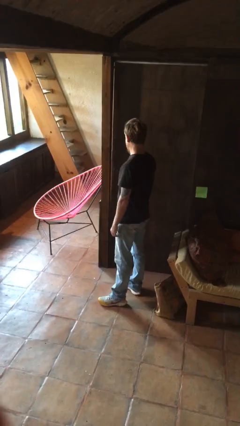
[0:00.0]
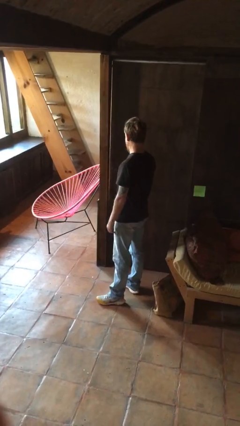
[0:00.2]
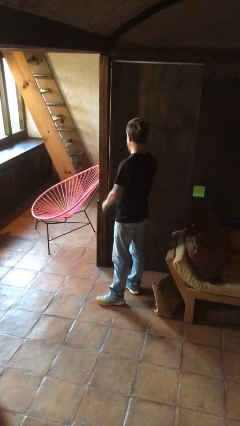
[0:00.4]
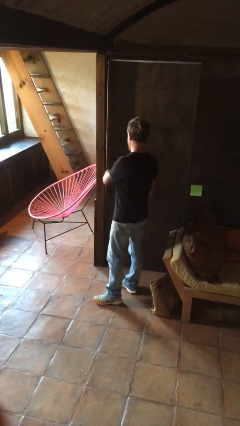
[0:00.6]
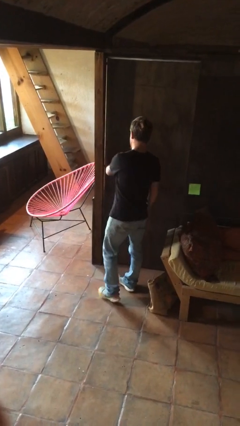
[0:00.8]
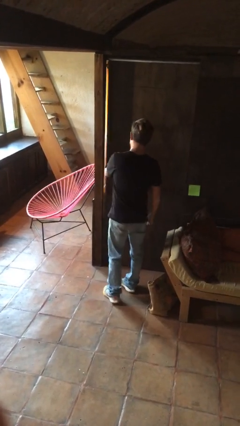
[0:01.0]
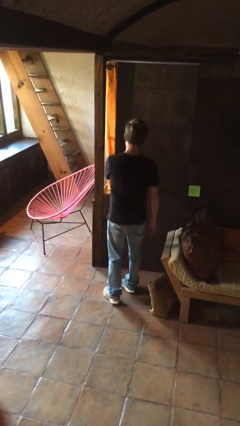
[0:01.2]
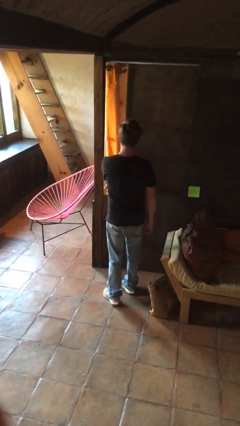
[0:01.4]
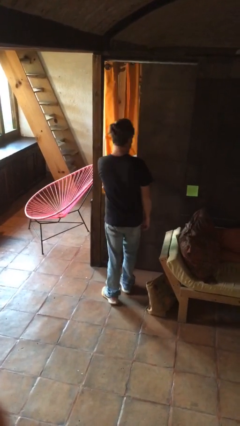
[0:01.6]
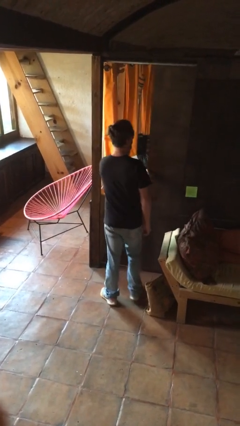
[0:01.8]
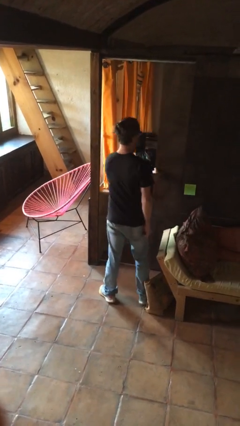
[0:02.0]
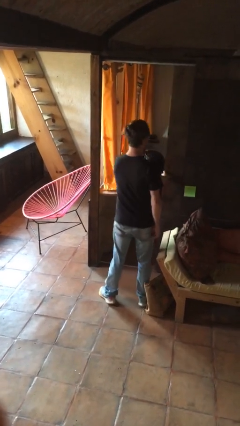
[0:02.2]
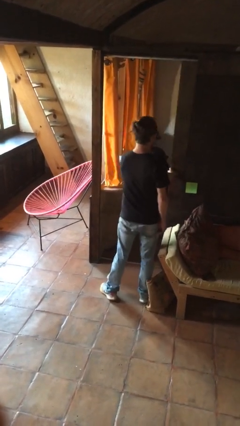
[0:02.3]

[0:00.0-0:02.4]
person opens facility door

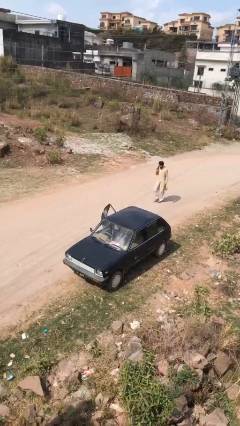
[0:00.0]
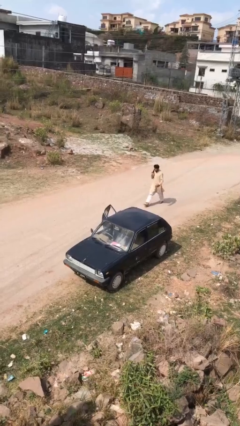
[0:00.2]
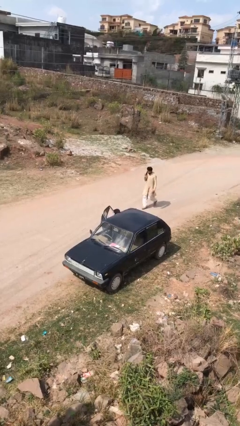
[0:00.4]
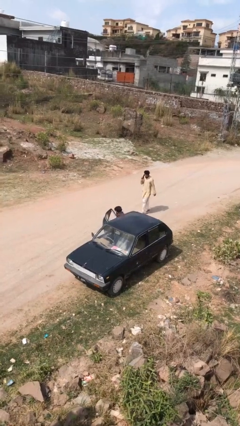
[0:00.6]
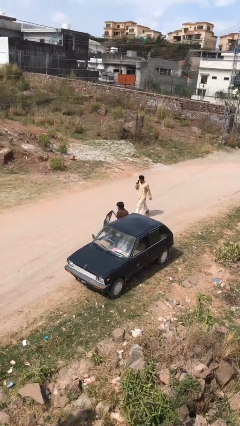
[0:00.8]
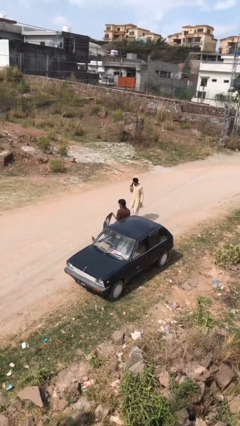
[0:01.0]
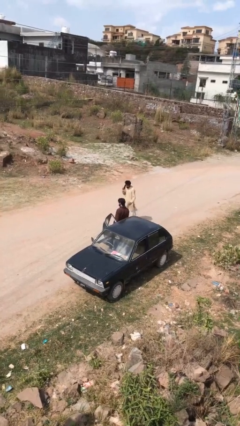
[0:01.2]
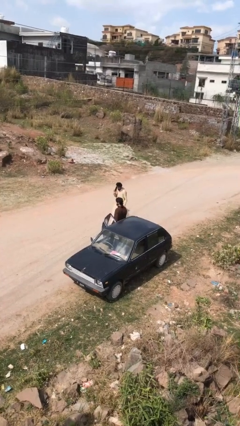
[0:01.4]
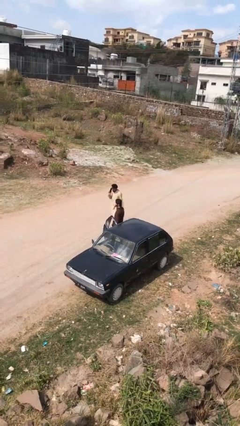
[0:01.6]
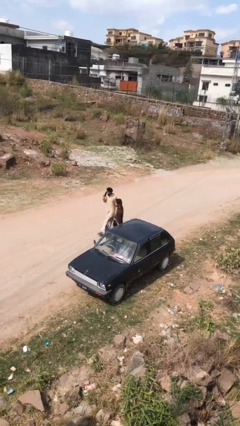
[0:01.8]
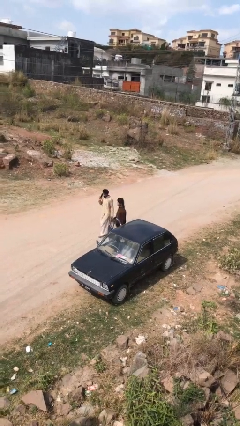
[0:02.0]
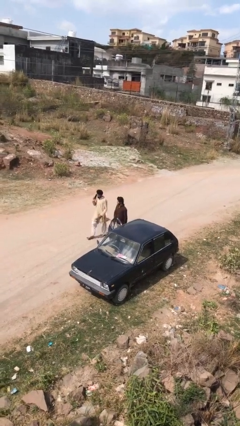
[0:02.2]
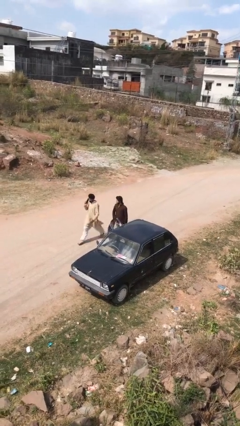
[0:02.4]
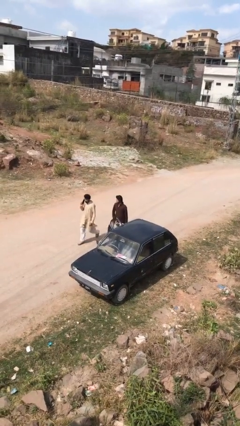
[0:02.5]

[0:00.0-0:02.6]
person exits car

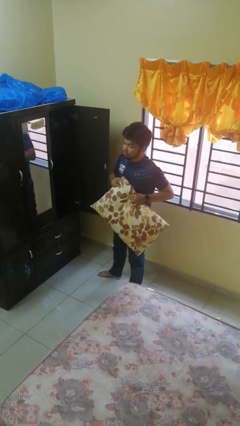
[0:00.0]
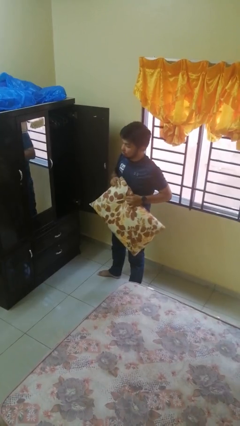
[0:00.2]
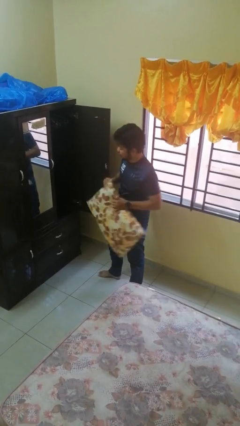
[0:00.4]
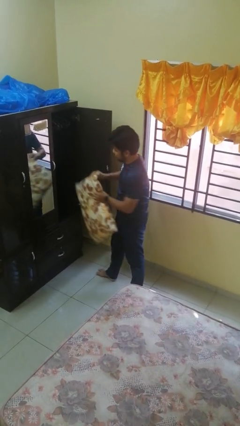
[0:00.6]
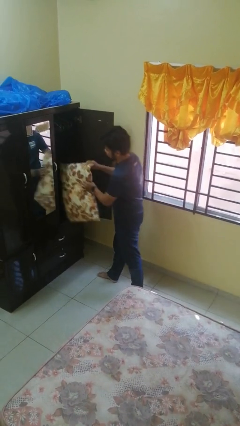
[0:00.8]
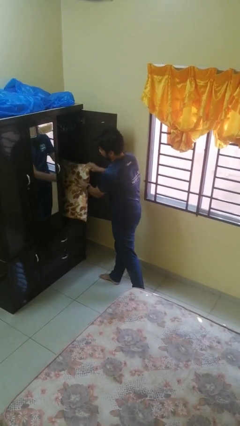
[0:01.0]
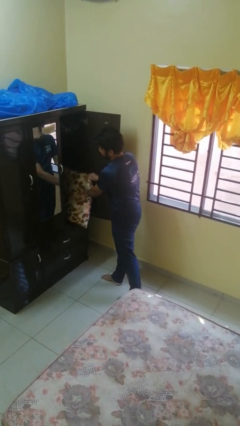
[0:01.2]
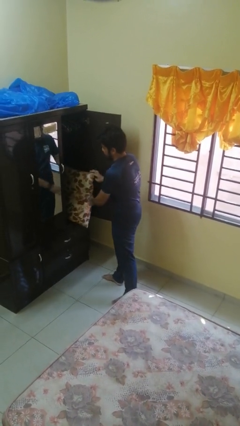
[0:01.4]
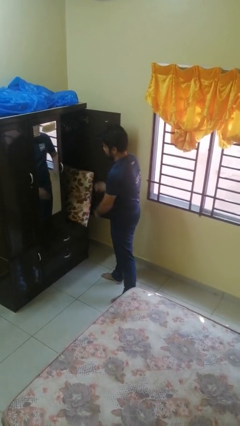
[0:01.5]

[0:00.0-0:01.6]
person puts down object into cabinet

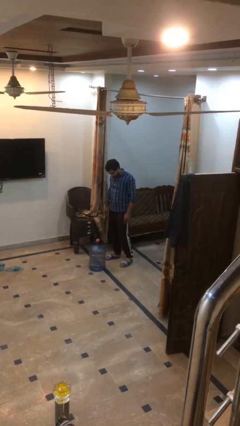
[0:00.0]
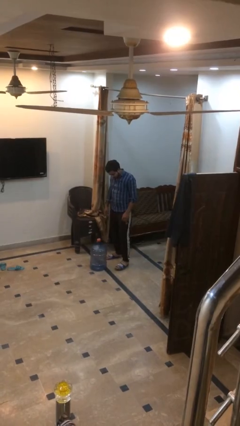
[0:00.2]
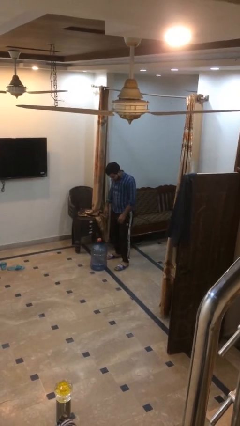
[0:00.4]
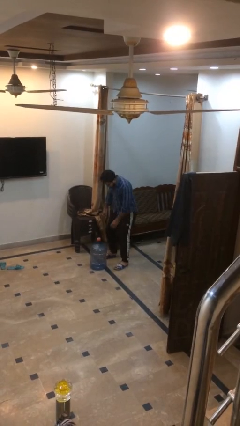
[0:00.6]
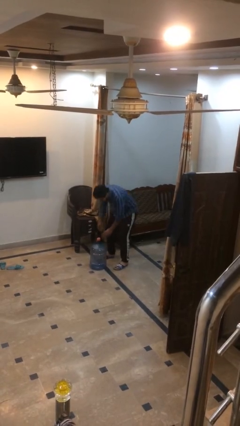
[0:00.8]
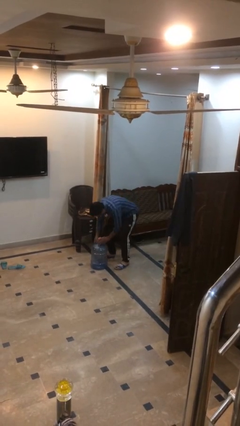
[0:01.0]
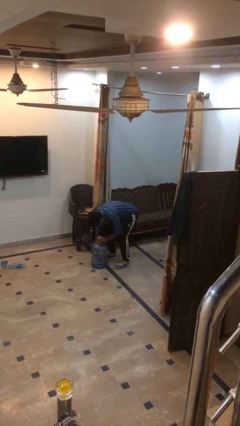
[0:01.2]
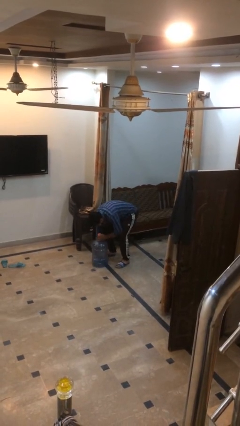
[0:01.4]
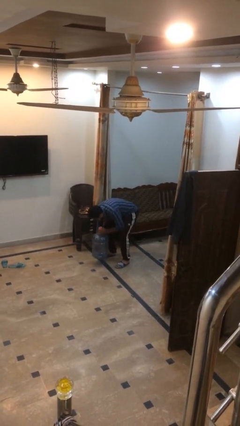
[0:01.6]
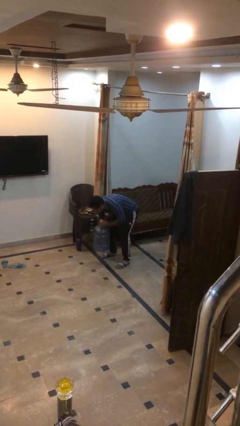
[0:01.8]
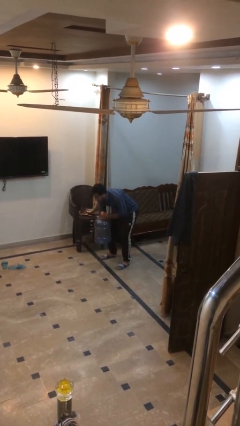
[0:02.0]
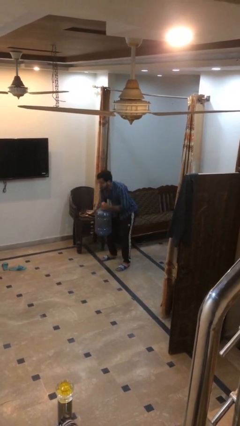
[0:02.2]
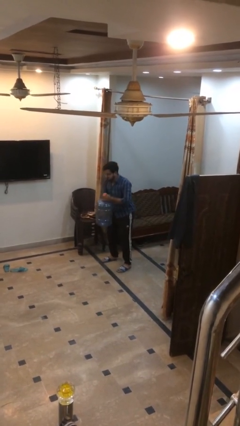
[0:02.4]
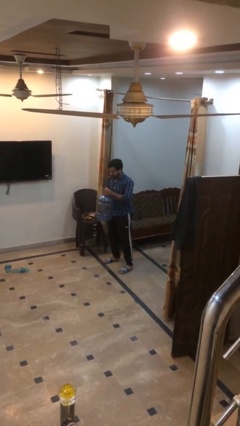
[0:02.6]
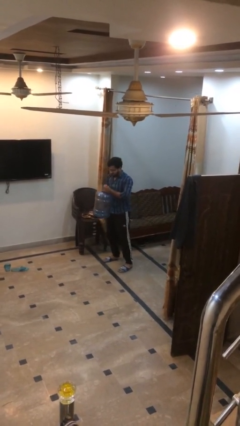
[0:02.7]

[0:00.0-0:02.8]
person picks up object from floor

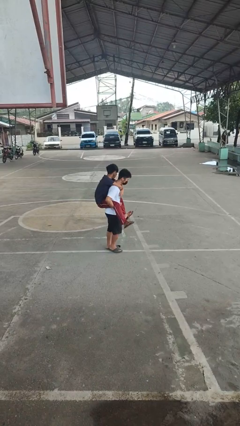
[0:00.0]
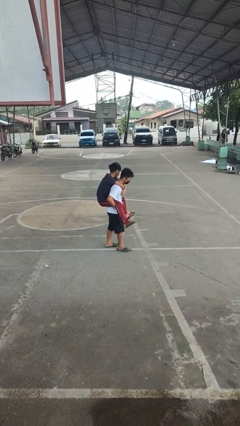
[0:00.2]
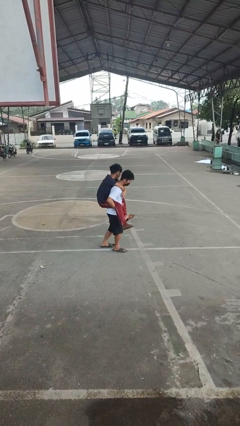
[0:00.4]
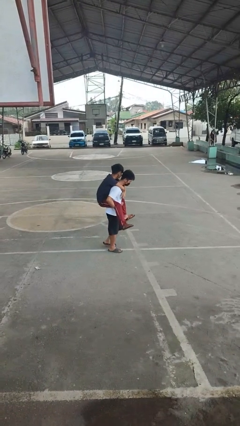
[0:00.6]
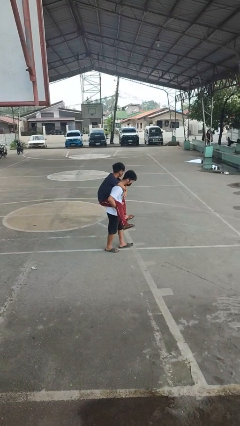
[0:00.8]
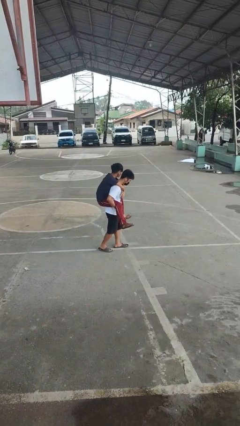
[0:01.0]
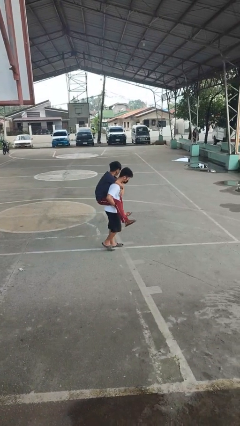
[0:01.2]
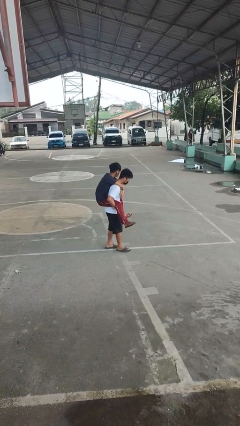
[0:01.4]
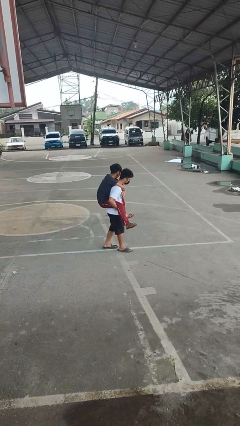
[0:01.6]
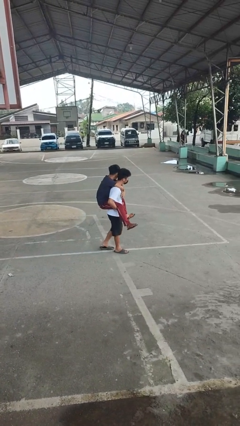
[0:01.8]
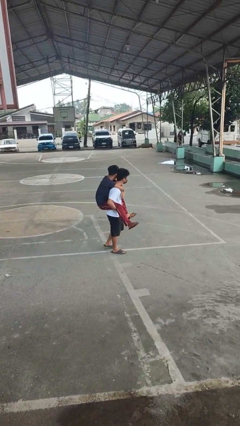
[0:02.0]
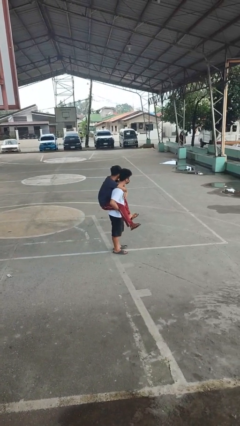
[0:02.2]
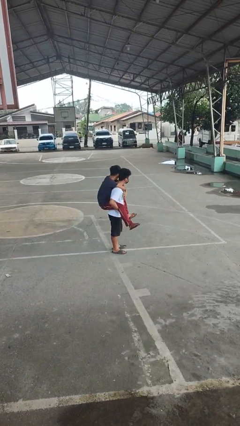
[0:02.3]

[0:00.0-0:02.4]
person carries person on back

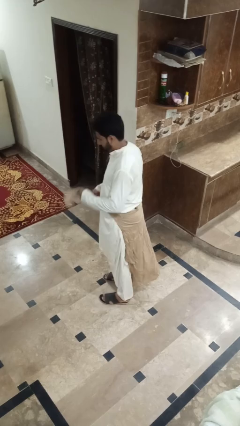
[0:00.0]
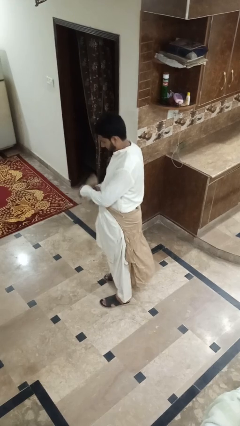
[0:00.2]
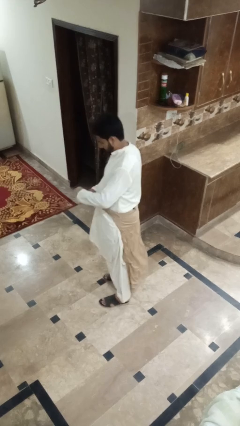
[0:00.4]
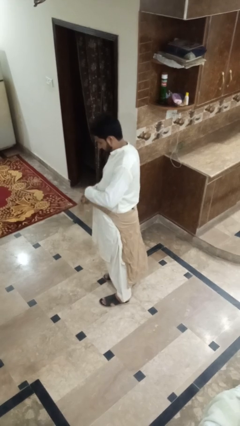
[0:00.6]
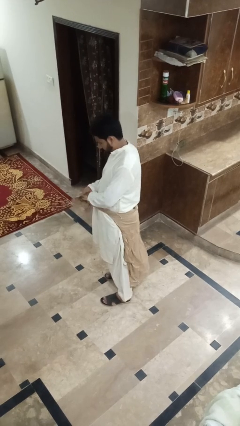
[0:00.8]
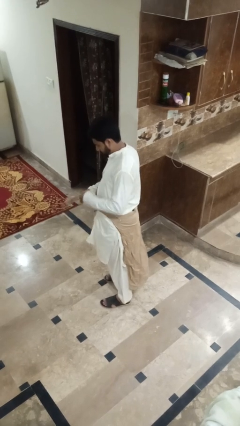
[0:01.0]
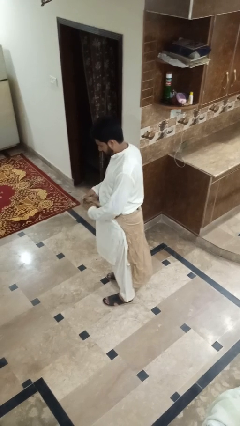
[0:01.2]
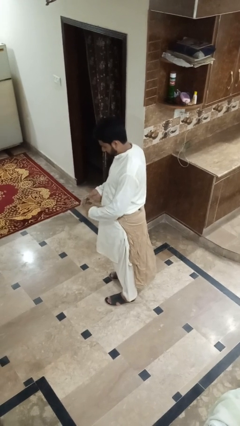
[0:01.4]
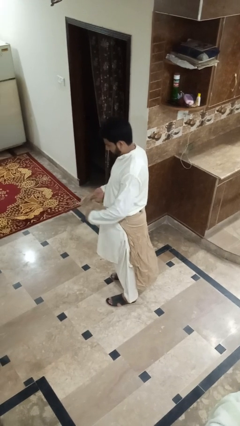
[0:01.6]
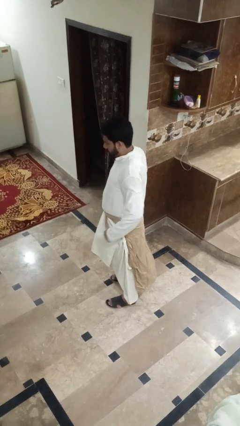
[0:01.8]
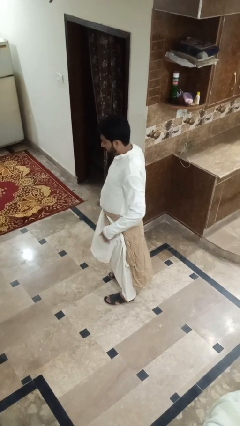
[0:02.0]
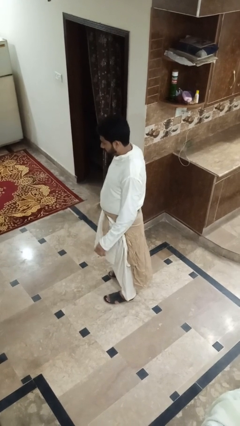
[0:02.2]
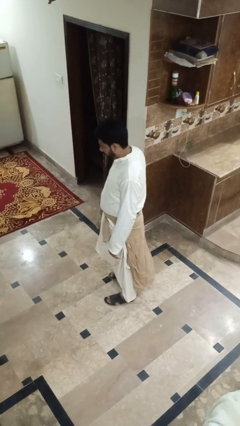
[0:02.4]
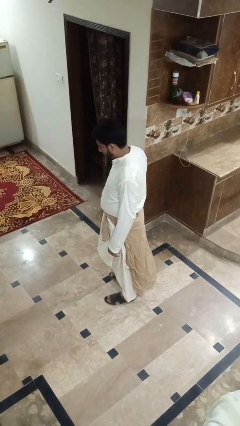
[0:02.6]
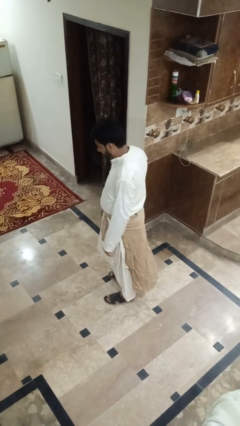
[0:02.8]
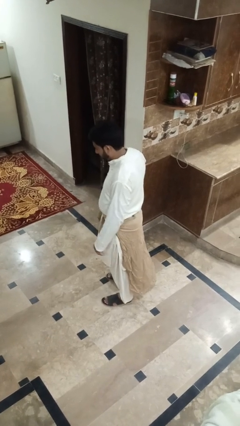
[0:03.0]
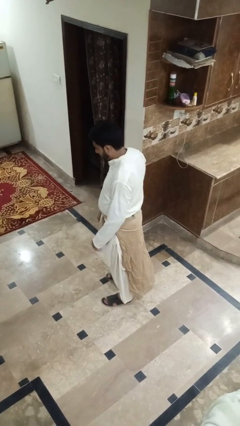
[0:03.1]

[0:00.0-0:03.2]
person ties jacket around waist

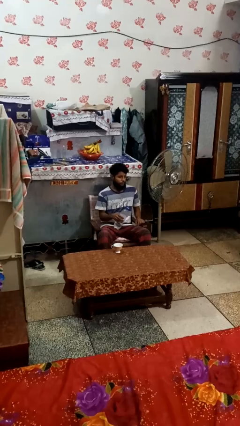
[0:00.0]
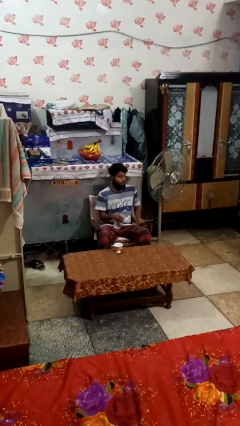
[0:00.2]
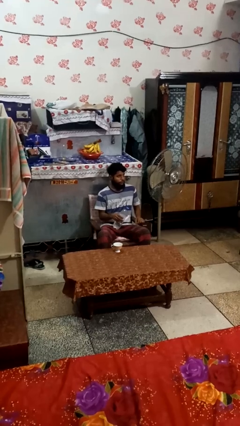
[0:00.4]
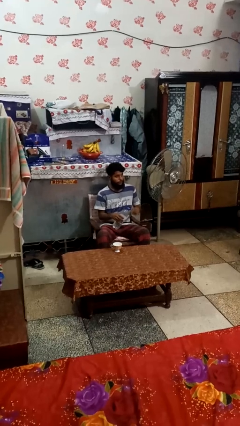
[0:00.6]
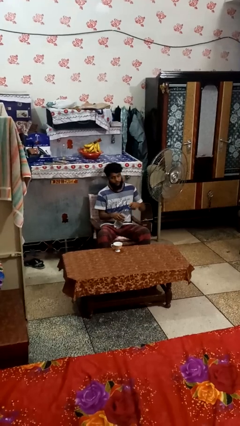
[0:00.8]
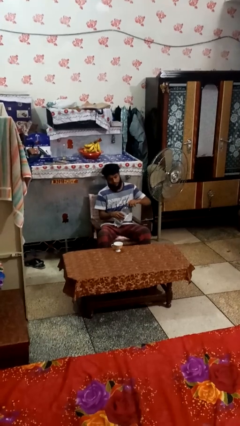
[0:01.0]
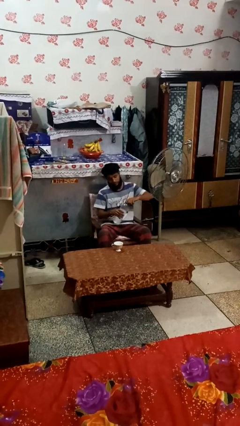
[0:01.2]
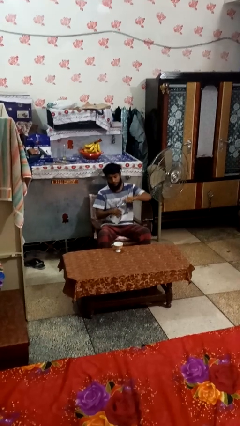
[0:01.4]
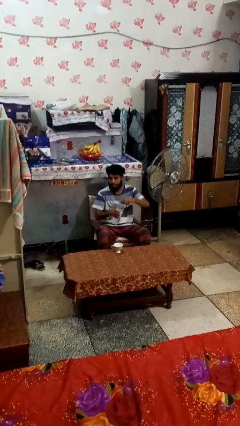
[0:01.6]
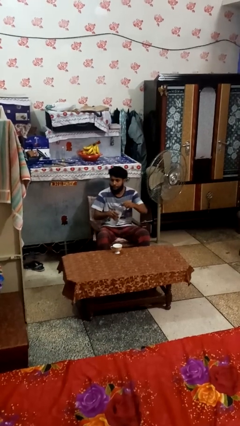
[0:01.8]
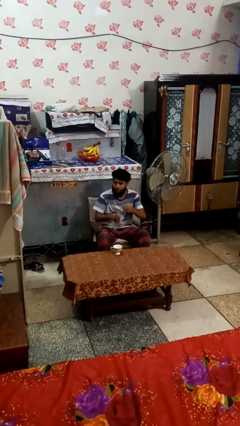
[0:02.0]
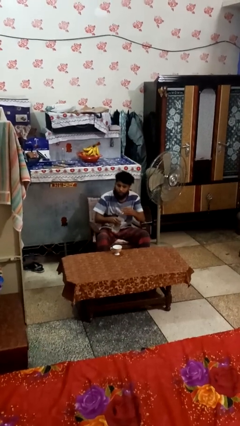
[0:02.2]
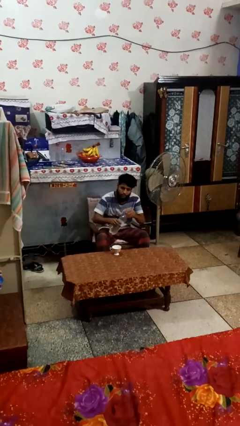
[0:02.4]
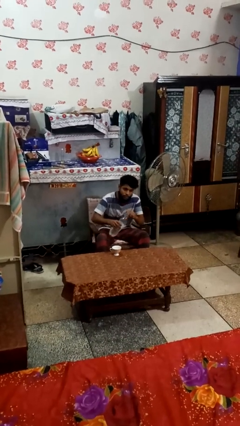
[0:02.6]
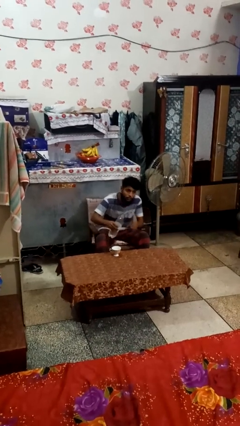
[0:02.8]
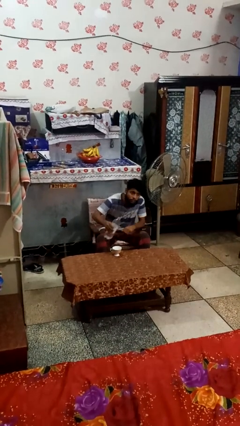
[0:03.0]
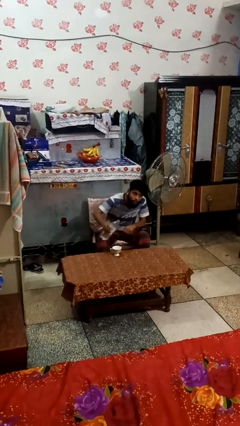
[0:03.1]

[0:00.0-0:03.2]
person unscrews lid from bottle
